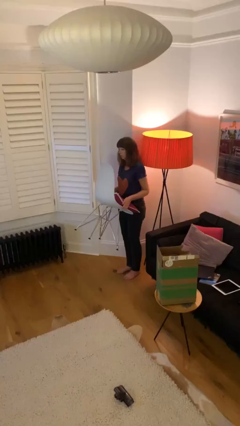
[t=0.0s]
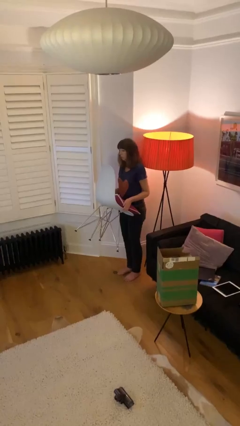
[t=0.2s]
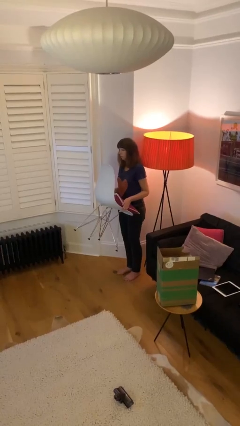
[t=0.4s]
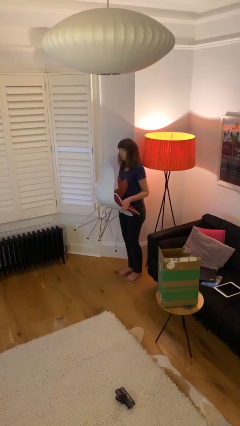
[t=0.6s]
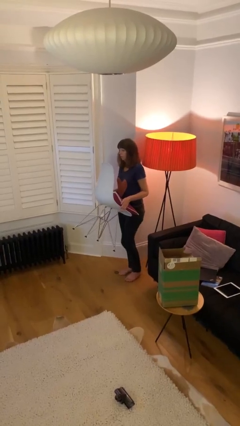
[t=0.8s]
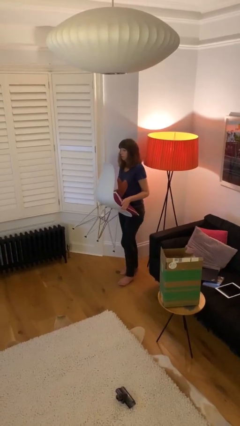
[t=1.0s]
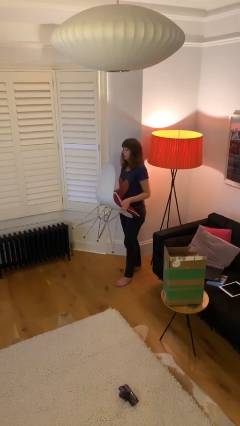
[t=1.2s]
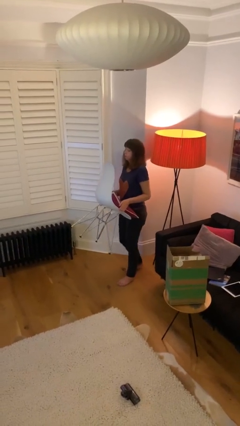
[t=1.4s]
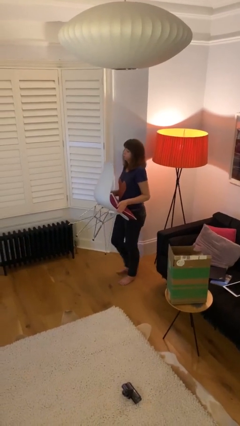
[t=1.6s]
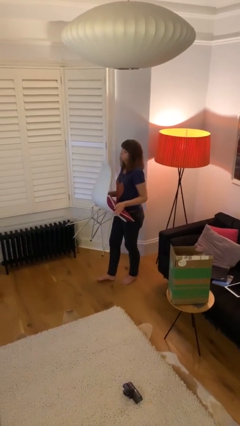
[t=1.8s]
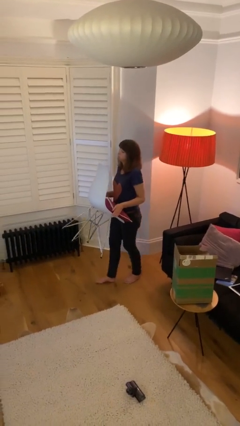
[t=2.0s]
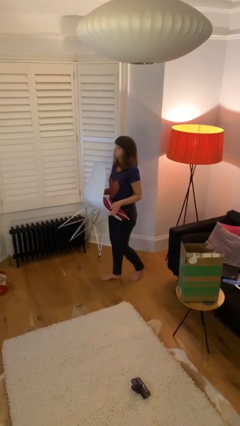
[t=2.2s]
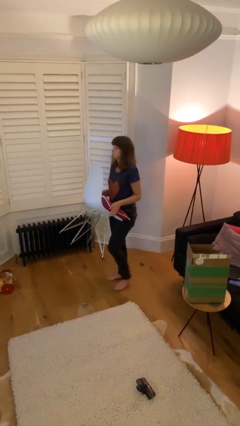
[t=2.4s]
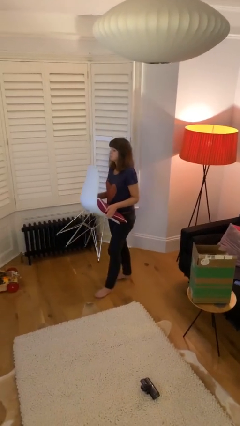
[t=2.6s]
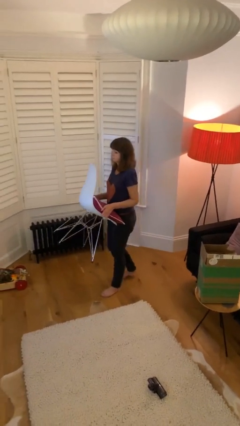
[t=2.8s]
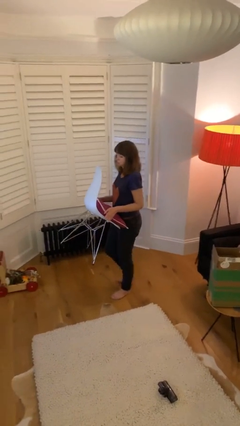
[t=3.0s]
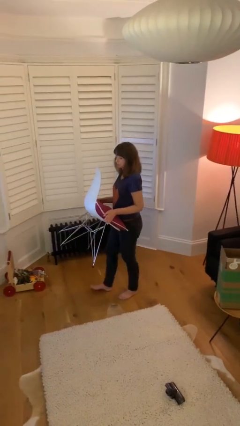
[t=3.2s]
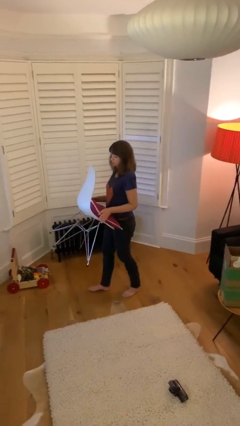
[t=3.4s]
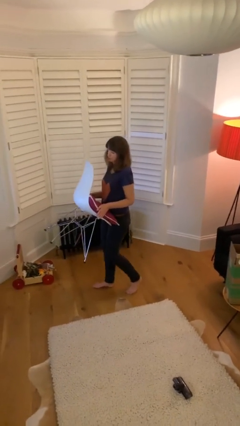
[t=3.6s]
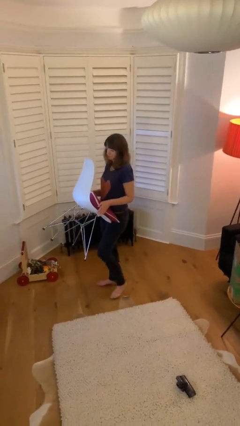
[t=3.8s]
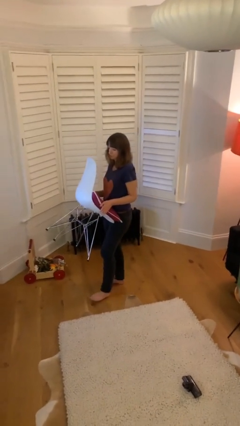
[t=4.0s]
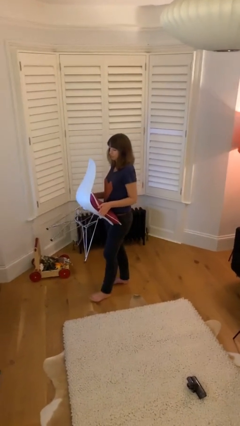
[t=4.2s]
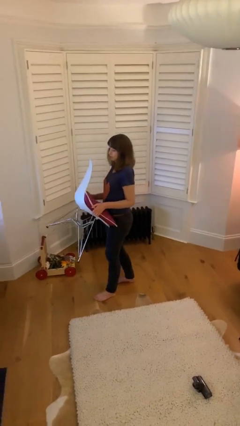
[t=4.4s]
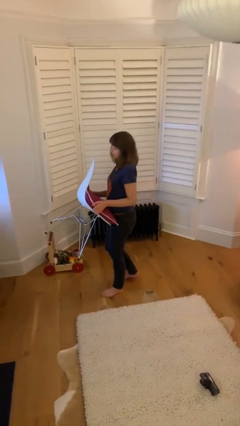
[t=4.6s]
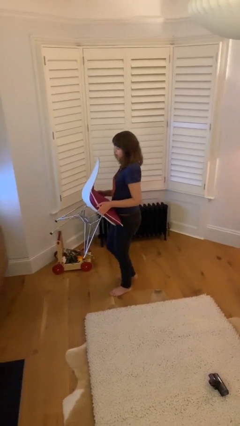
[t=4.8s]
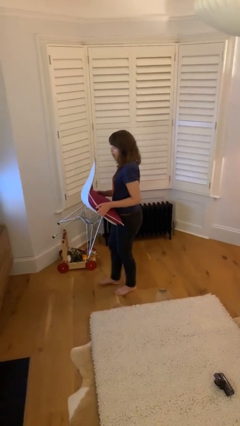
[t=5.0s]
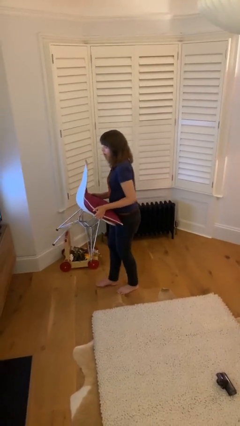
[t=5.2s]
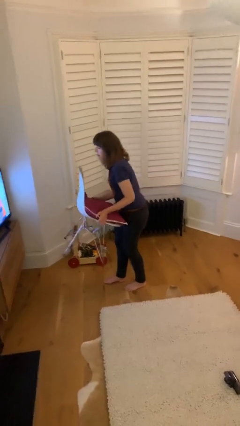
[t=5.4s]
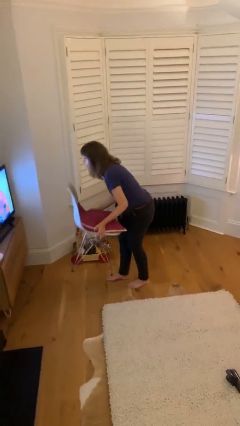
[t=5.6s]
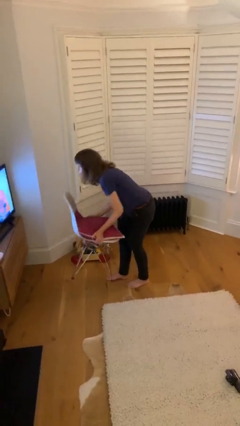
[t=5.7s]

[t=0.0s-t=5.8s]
person carries heavy object

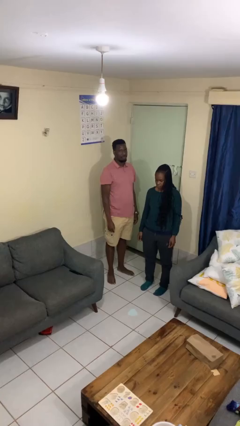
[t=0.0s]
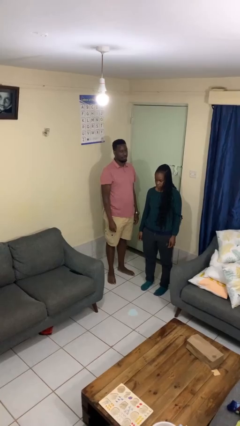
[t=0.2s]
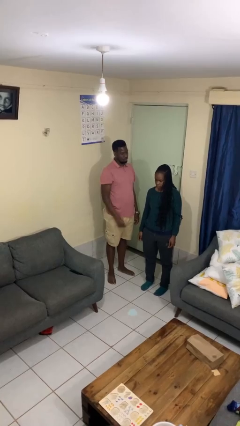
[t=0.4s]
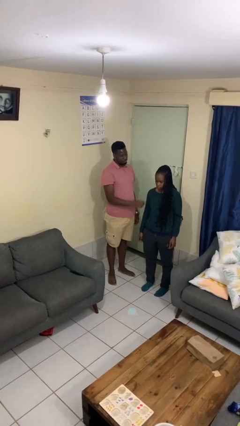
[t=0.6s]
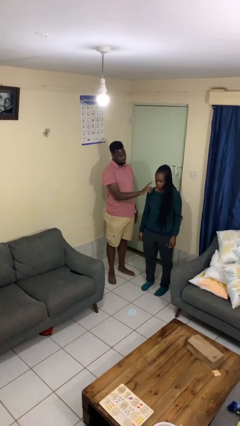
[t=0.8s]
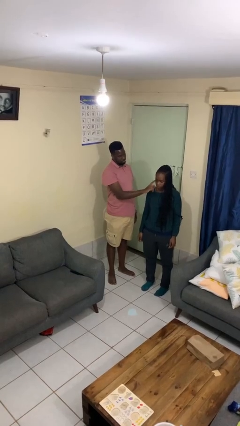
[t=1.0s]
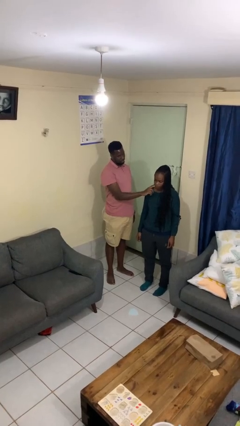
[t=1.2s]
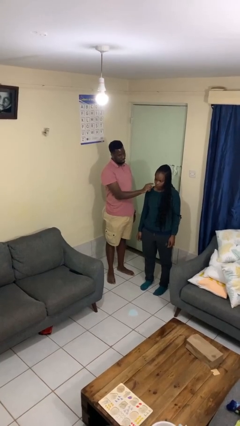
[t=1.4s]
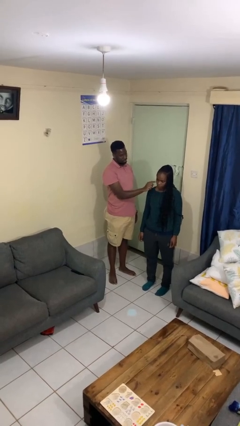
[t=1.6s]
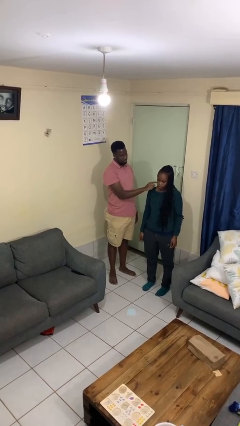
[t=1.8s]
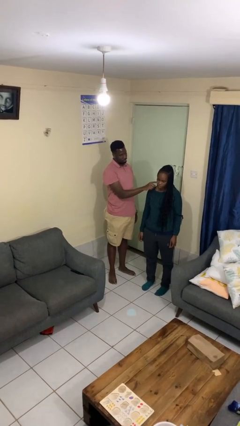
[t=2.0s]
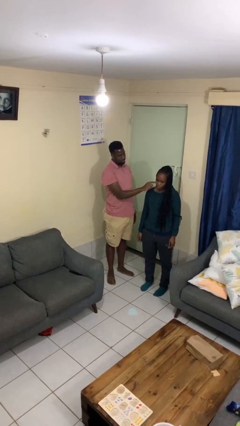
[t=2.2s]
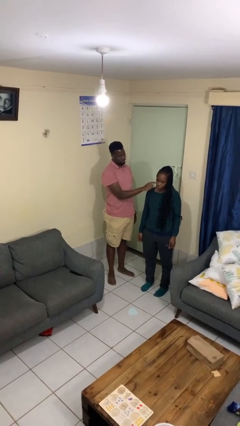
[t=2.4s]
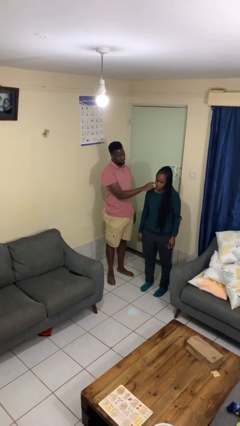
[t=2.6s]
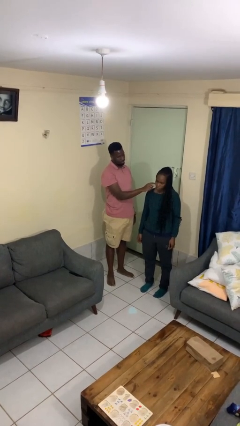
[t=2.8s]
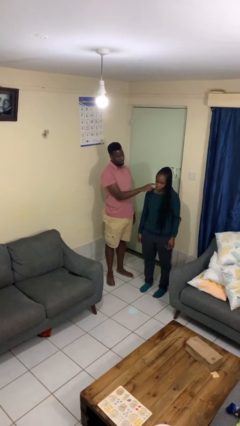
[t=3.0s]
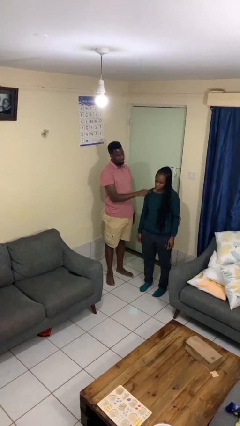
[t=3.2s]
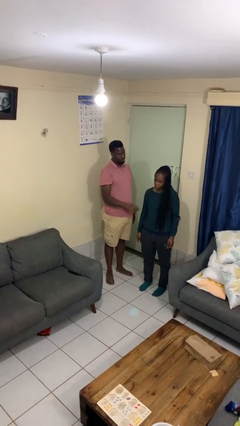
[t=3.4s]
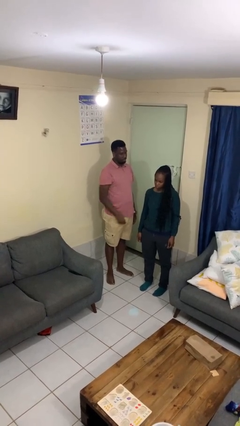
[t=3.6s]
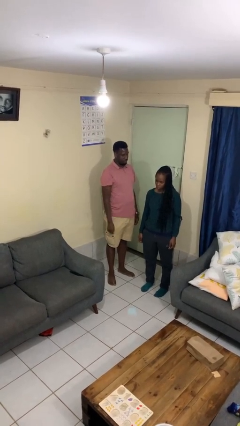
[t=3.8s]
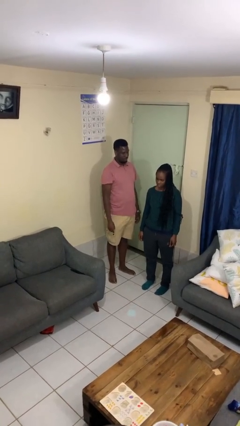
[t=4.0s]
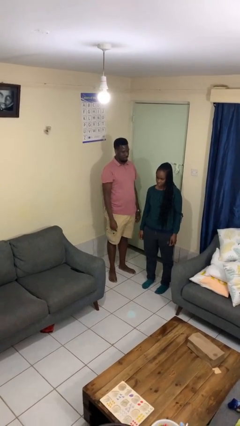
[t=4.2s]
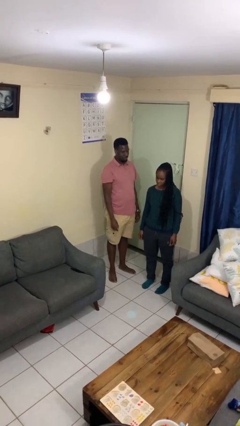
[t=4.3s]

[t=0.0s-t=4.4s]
person touches face of person

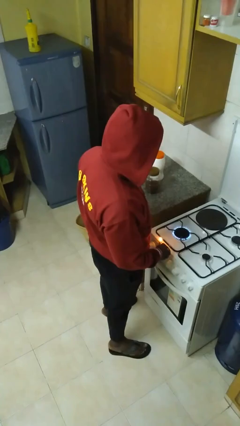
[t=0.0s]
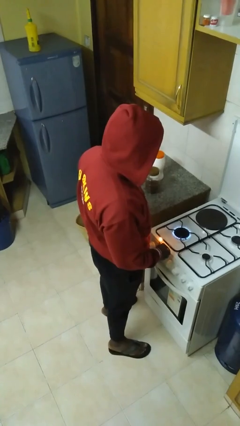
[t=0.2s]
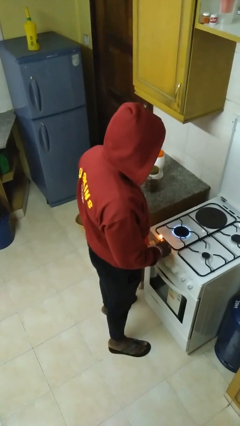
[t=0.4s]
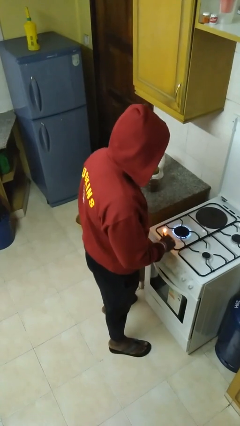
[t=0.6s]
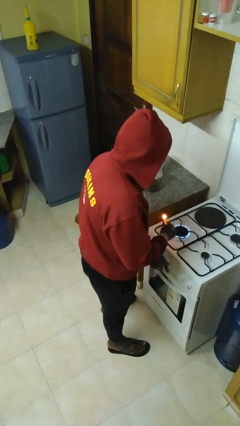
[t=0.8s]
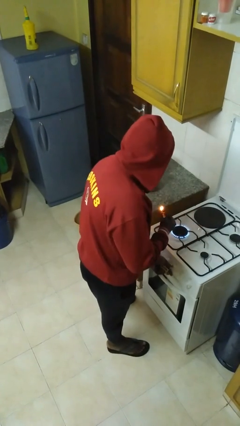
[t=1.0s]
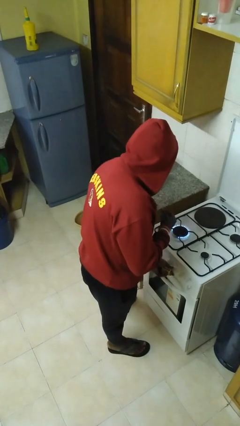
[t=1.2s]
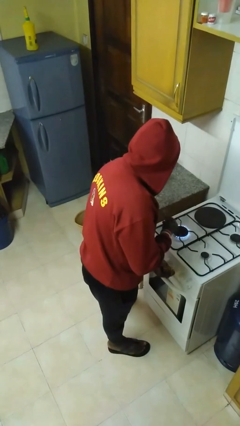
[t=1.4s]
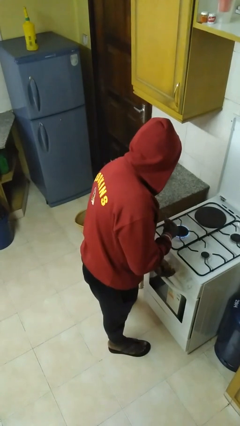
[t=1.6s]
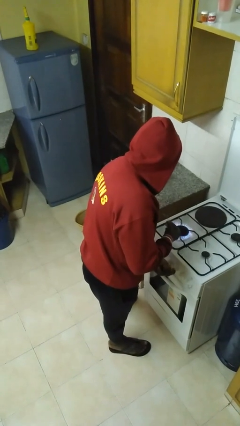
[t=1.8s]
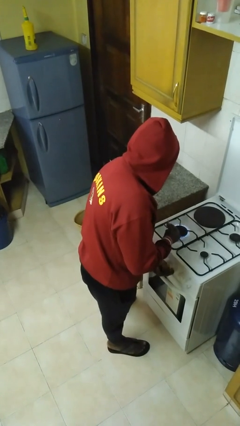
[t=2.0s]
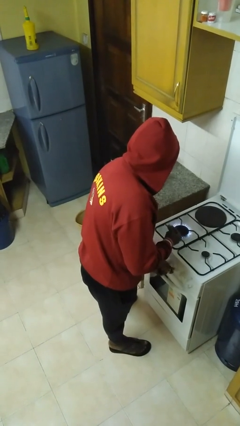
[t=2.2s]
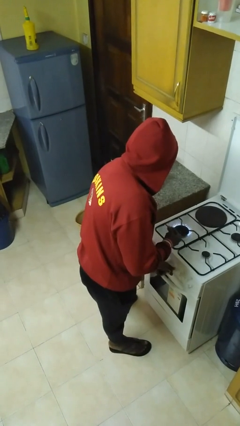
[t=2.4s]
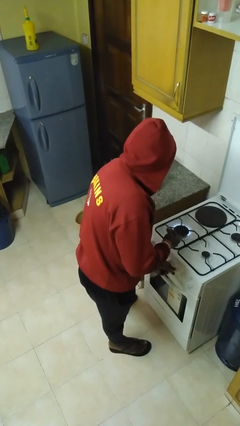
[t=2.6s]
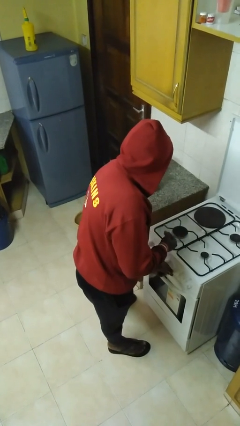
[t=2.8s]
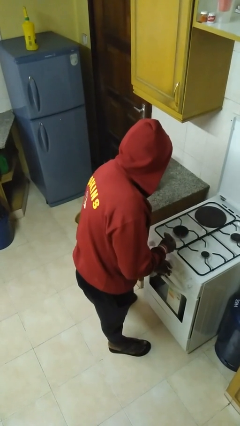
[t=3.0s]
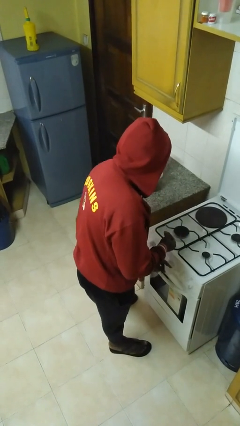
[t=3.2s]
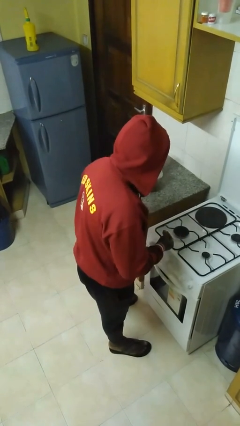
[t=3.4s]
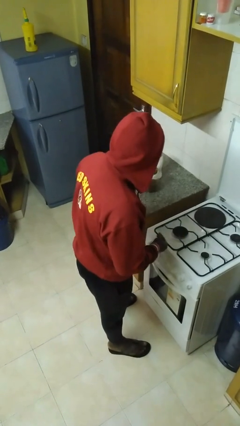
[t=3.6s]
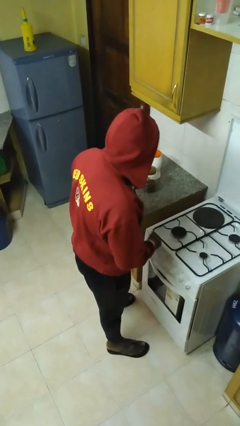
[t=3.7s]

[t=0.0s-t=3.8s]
person turns off stovetop

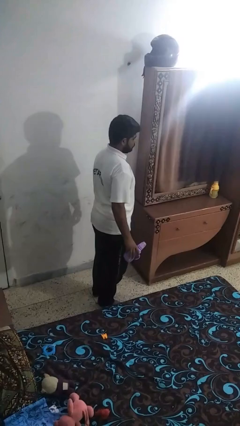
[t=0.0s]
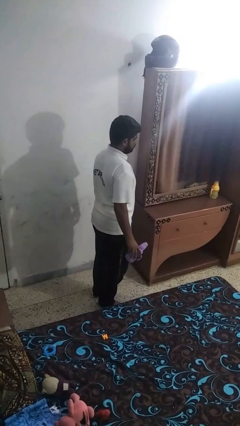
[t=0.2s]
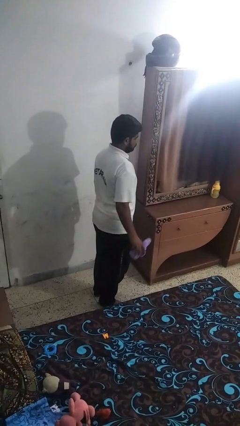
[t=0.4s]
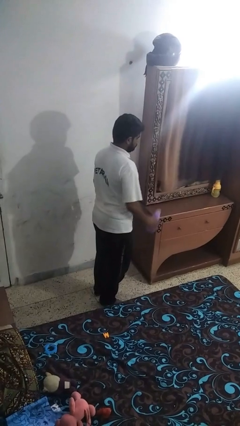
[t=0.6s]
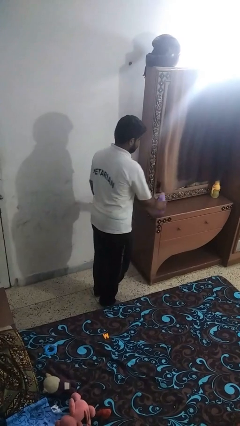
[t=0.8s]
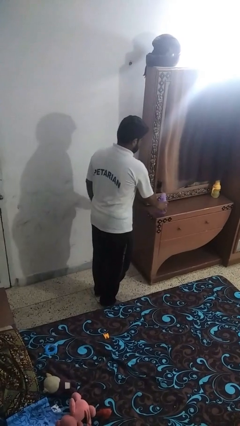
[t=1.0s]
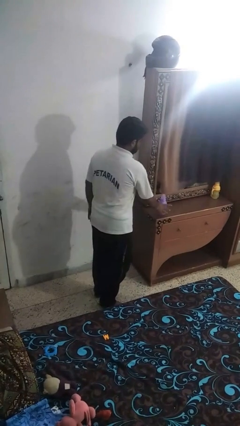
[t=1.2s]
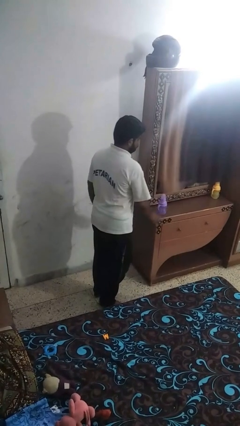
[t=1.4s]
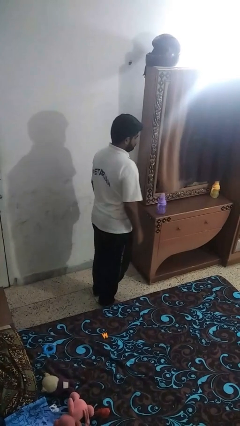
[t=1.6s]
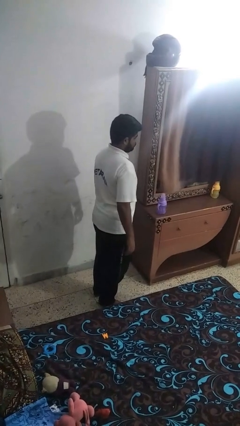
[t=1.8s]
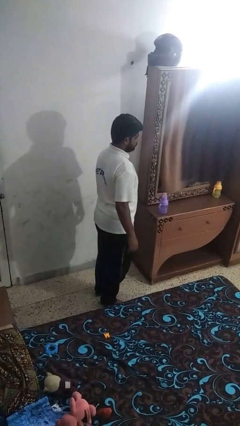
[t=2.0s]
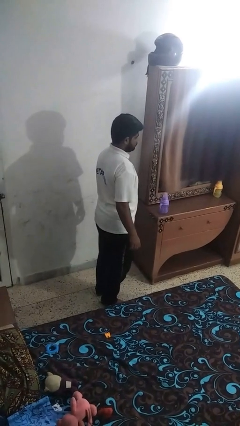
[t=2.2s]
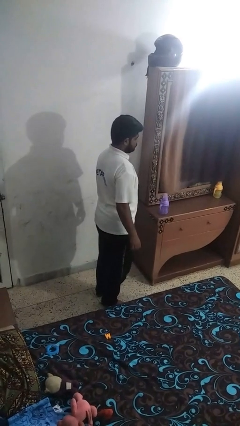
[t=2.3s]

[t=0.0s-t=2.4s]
person puts down object on countertop

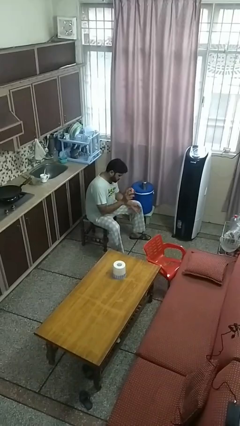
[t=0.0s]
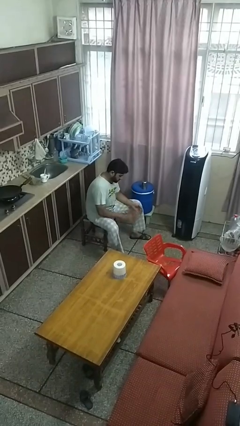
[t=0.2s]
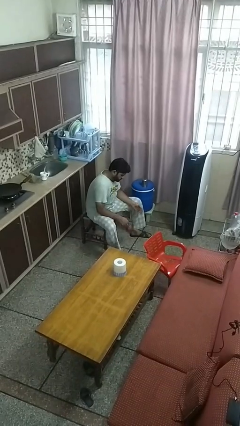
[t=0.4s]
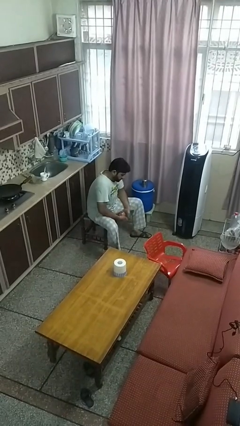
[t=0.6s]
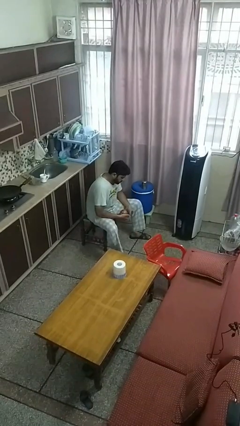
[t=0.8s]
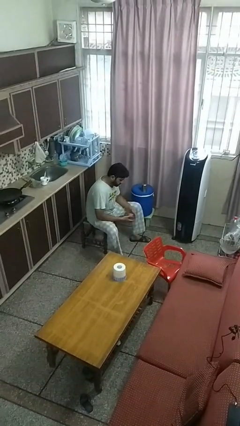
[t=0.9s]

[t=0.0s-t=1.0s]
person bounces ball on floor

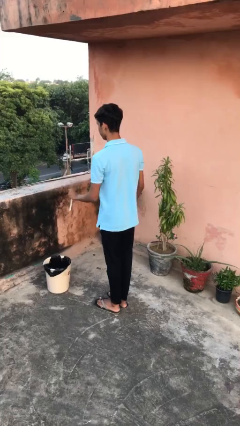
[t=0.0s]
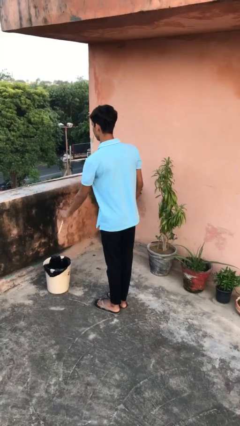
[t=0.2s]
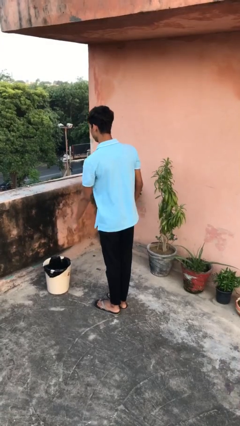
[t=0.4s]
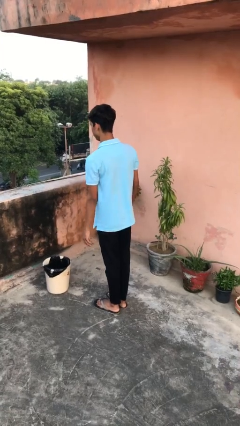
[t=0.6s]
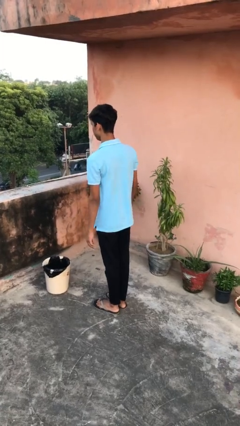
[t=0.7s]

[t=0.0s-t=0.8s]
person discards trash
